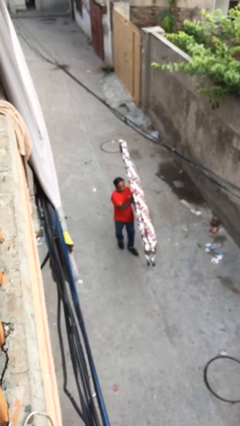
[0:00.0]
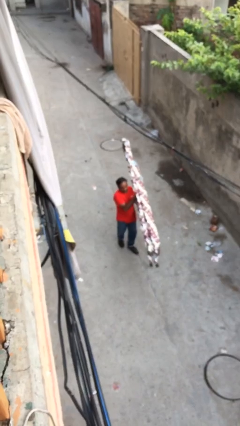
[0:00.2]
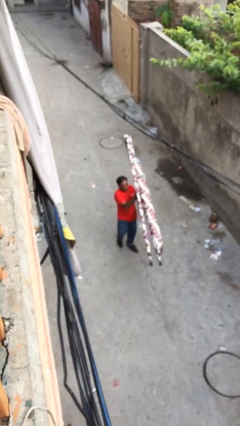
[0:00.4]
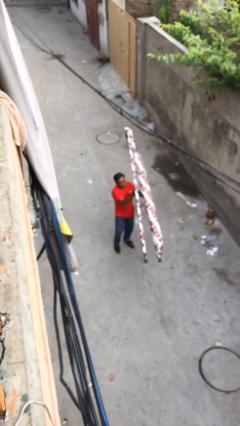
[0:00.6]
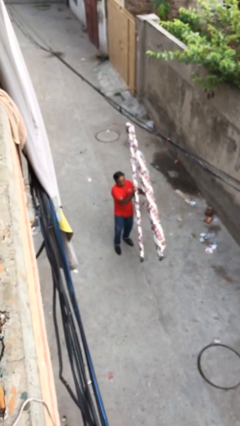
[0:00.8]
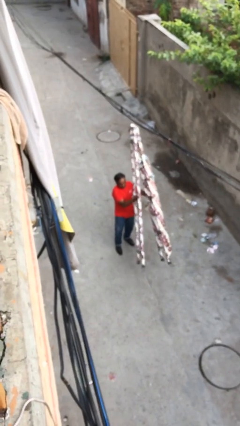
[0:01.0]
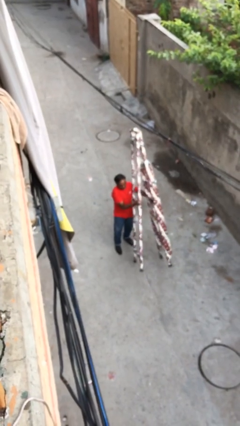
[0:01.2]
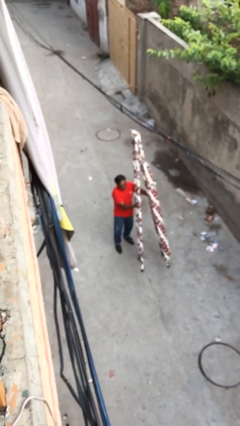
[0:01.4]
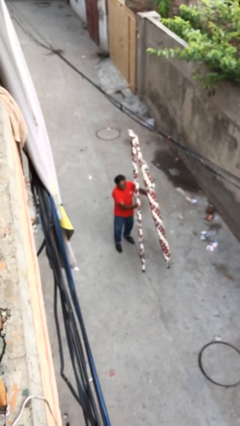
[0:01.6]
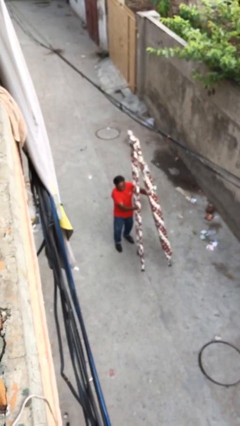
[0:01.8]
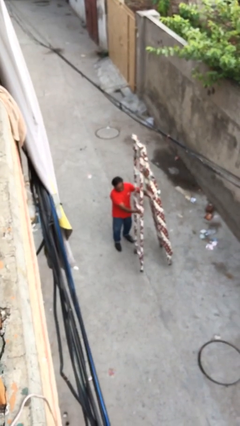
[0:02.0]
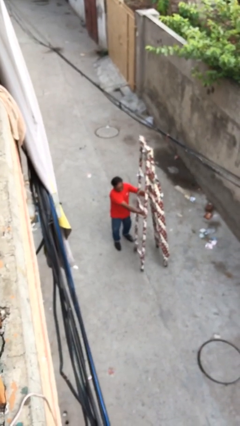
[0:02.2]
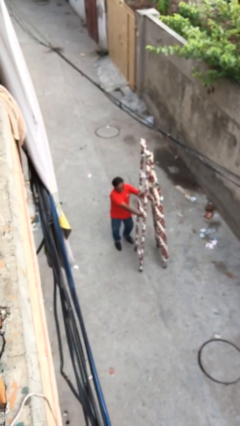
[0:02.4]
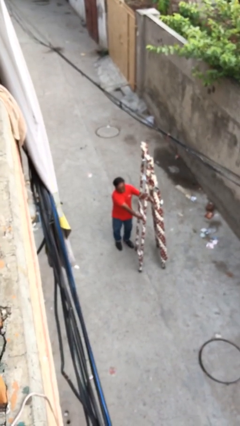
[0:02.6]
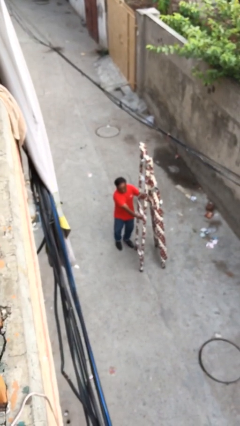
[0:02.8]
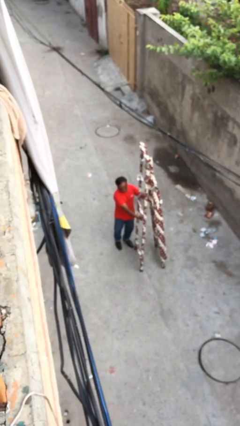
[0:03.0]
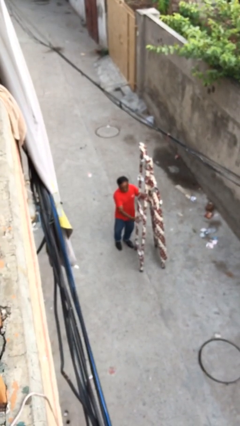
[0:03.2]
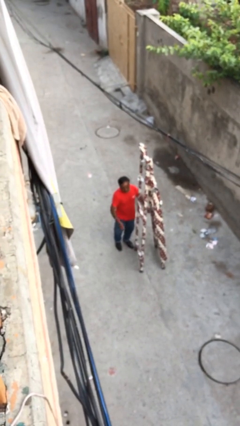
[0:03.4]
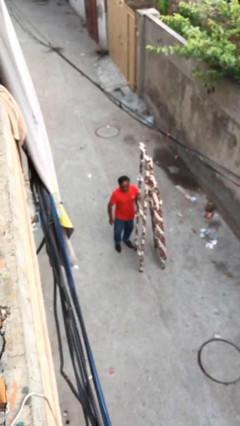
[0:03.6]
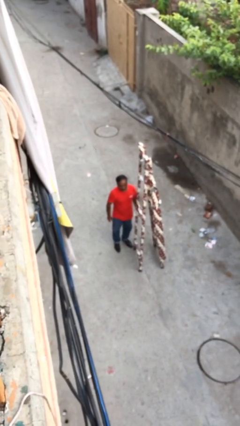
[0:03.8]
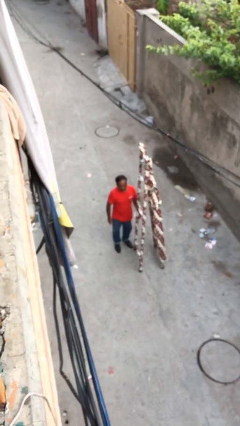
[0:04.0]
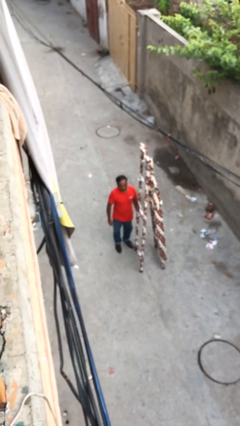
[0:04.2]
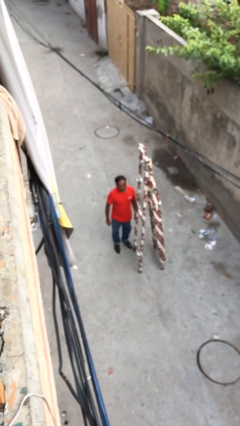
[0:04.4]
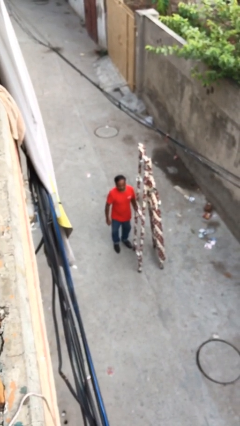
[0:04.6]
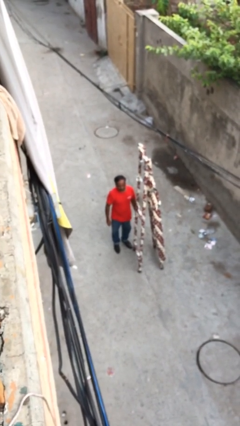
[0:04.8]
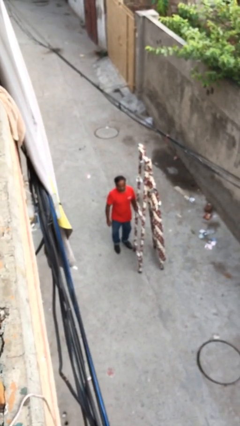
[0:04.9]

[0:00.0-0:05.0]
person puts down object on floor

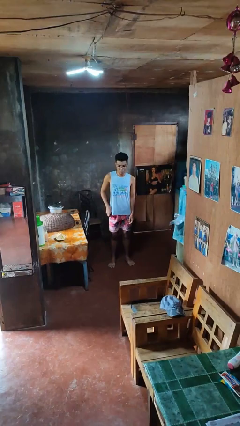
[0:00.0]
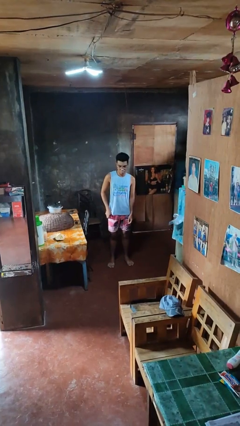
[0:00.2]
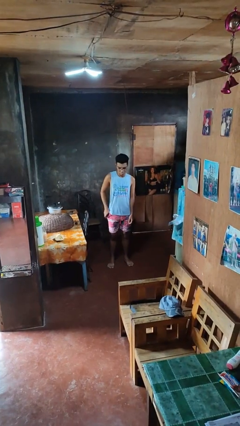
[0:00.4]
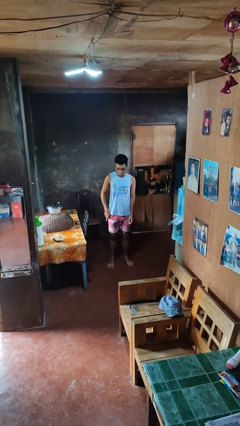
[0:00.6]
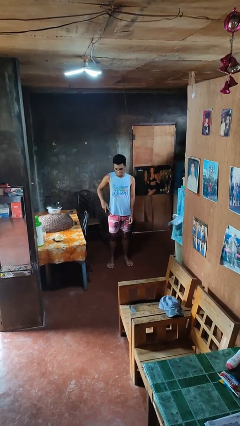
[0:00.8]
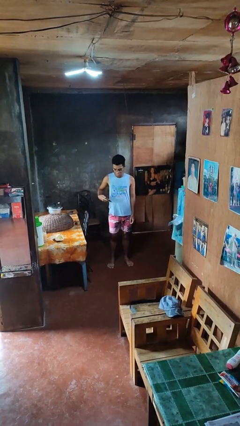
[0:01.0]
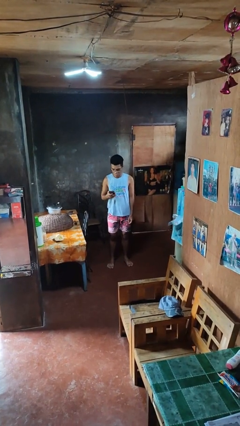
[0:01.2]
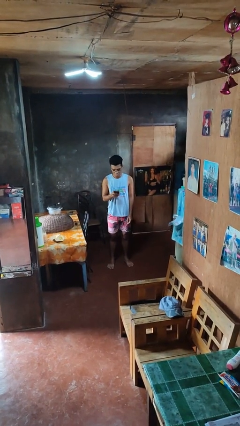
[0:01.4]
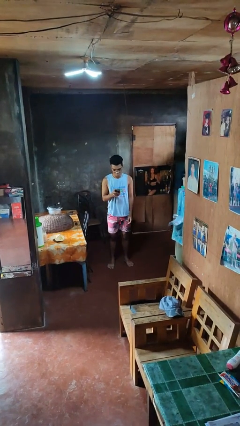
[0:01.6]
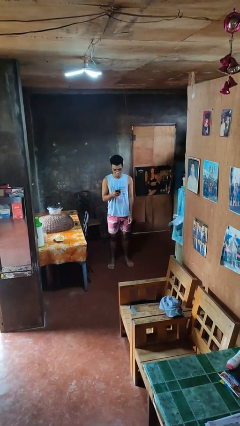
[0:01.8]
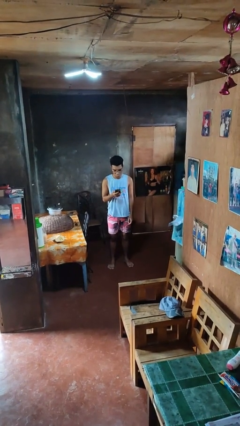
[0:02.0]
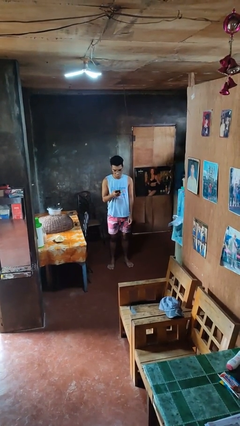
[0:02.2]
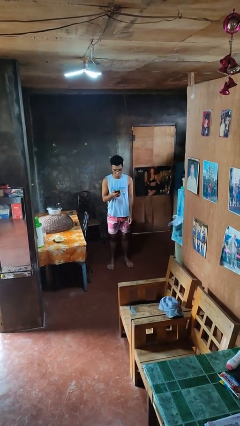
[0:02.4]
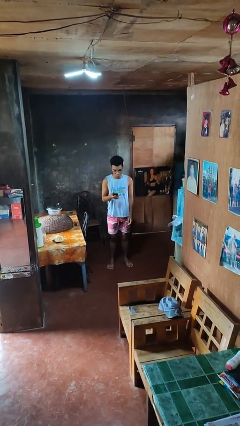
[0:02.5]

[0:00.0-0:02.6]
person takes phone from pocket

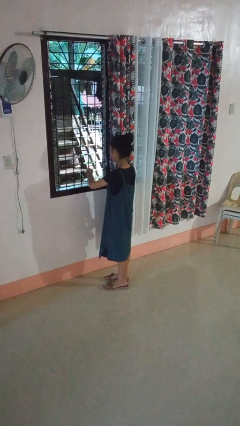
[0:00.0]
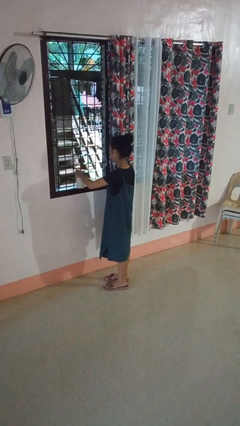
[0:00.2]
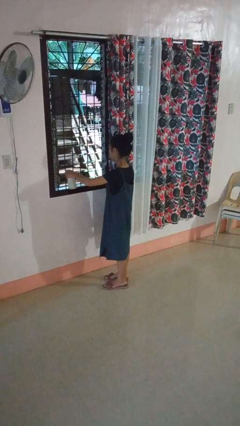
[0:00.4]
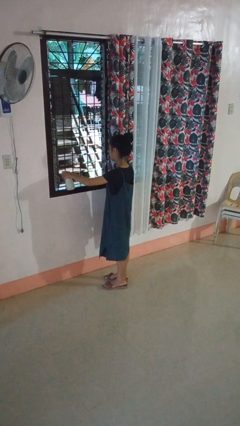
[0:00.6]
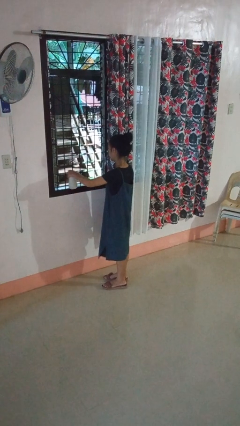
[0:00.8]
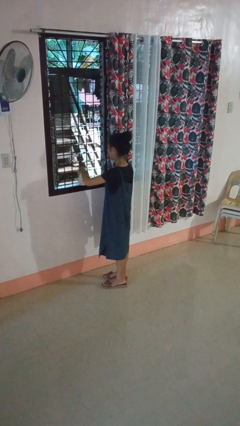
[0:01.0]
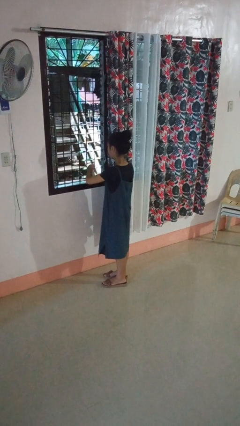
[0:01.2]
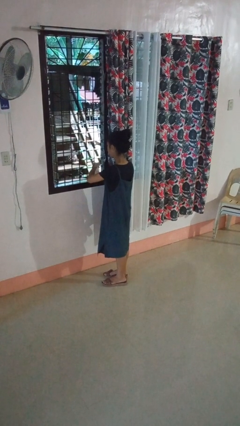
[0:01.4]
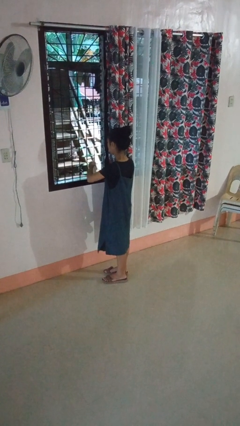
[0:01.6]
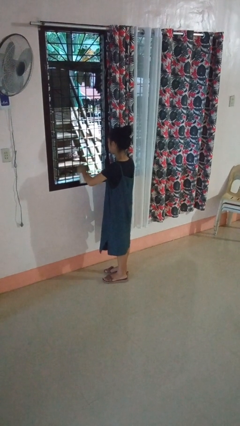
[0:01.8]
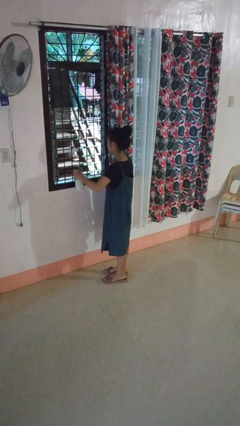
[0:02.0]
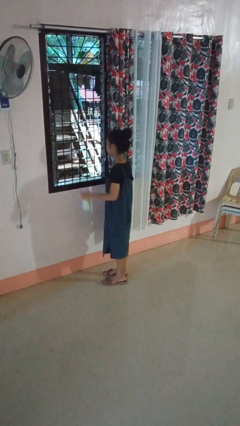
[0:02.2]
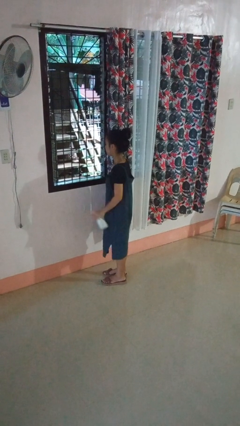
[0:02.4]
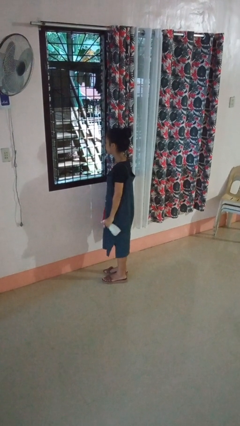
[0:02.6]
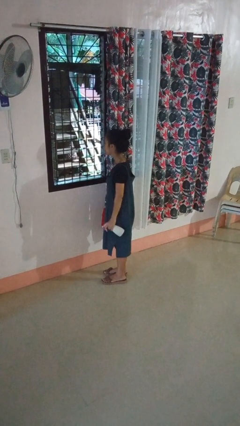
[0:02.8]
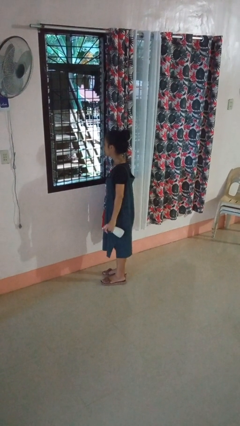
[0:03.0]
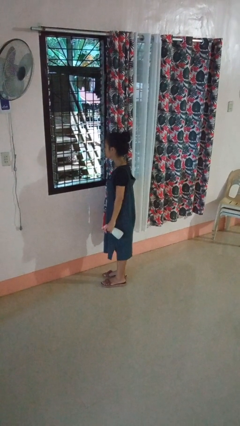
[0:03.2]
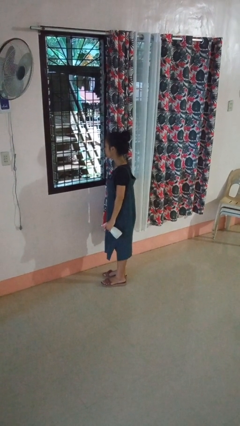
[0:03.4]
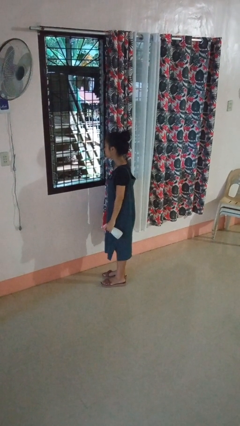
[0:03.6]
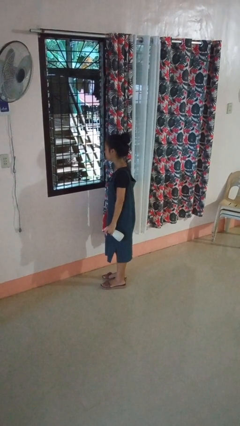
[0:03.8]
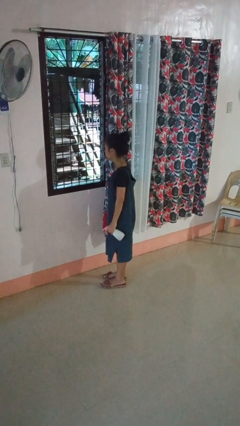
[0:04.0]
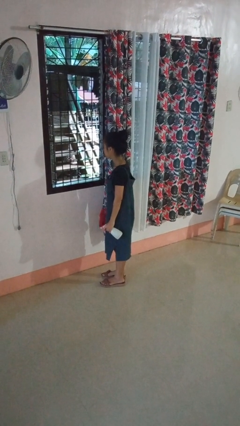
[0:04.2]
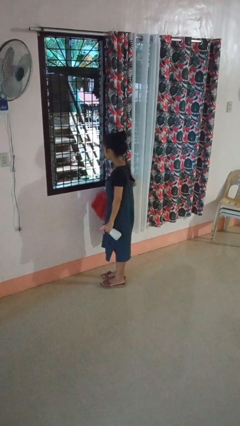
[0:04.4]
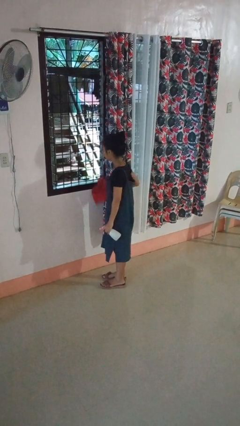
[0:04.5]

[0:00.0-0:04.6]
person sprays from bottle

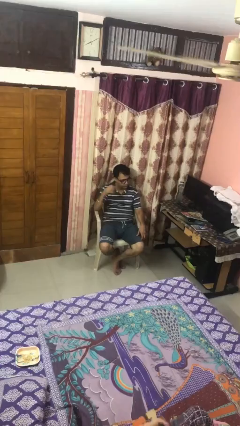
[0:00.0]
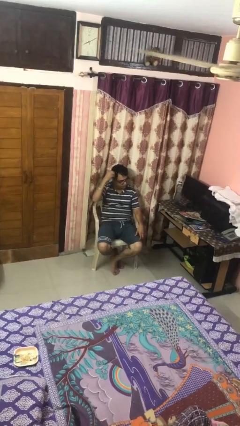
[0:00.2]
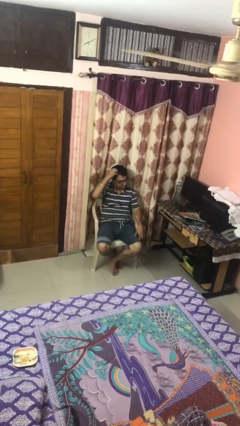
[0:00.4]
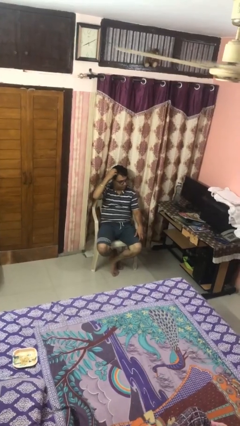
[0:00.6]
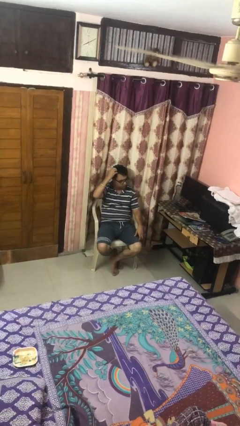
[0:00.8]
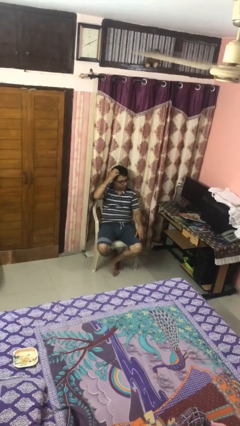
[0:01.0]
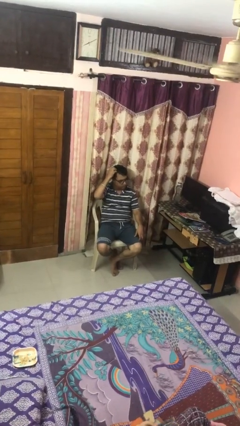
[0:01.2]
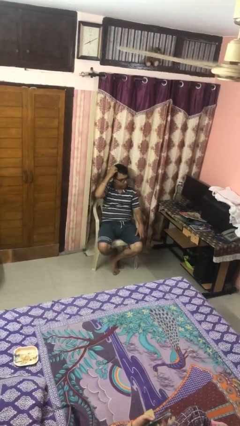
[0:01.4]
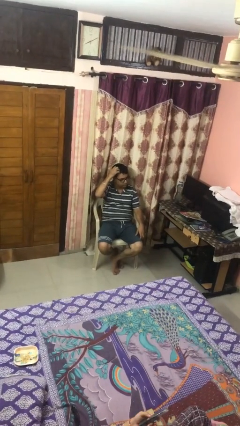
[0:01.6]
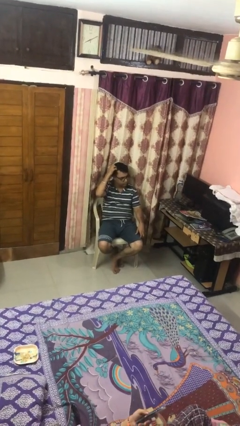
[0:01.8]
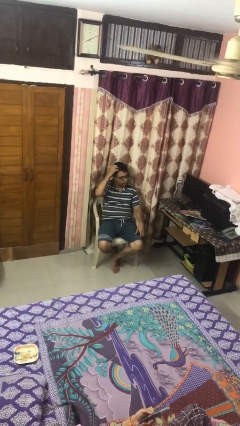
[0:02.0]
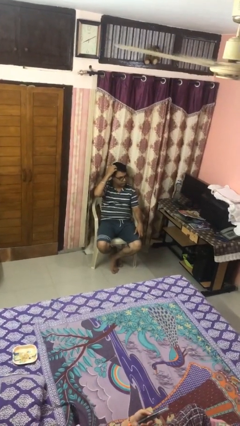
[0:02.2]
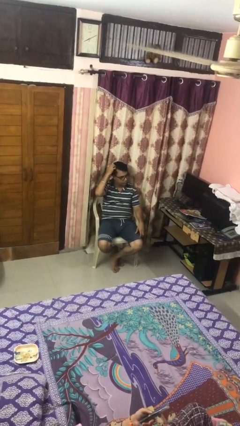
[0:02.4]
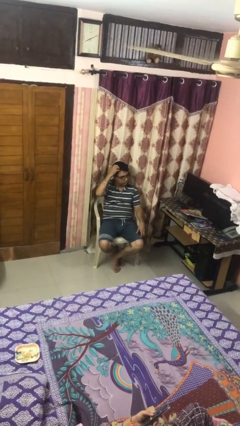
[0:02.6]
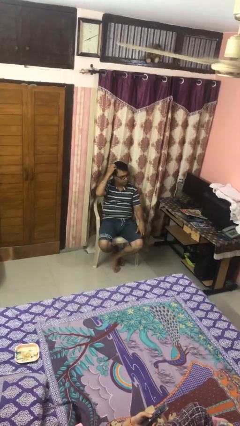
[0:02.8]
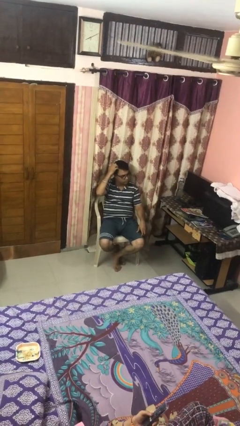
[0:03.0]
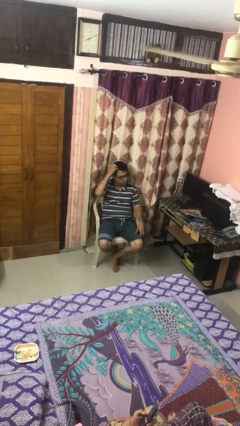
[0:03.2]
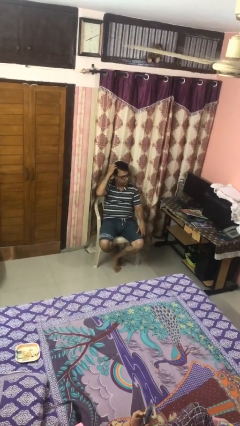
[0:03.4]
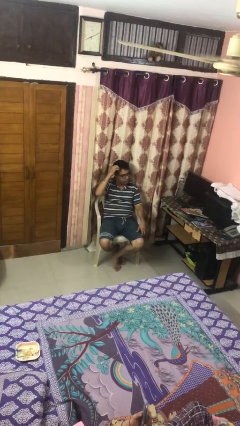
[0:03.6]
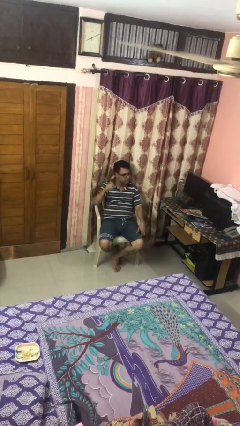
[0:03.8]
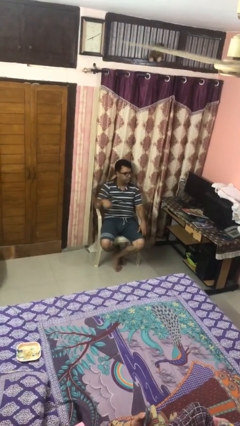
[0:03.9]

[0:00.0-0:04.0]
person scratches face

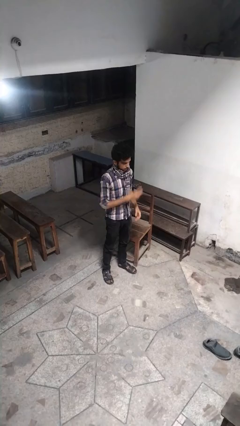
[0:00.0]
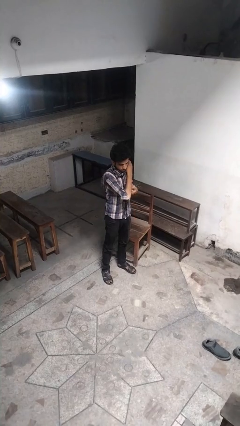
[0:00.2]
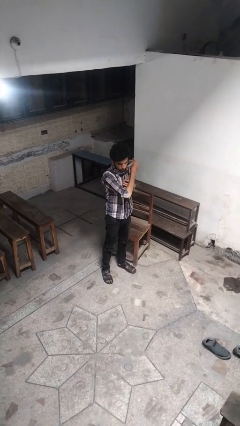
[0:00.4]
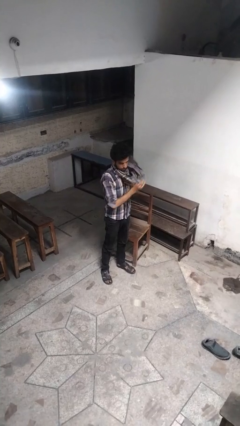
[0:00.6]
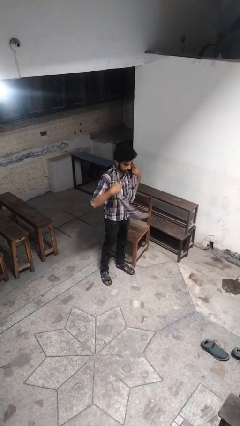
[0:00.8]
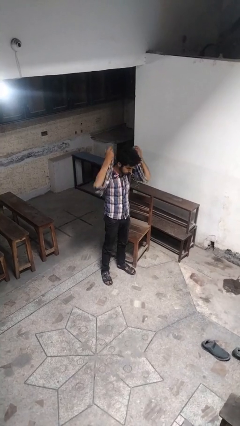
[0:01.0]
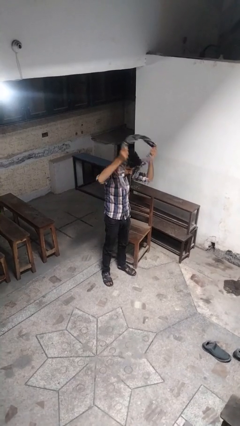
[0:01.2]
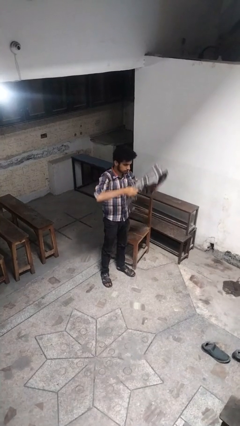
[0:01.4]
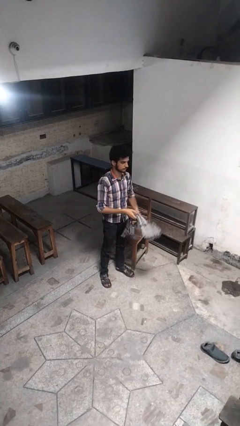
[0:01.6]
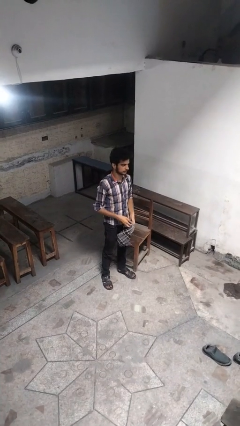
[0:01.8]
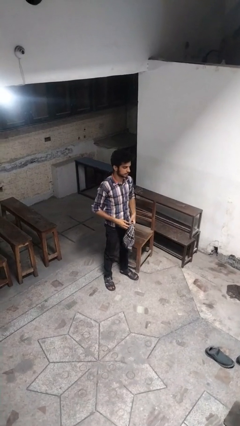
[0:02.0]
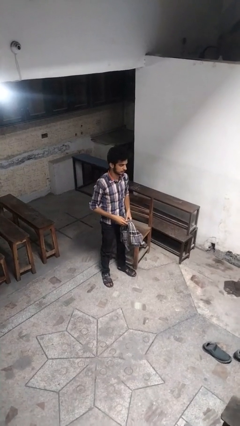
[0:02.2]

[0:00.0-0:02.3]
person takes off scarf
